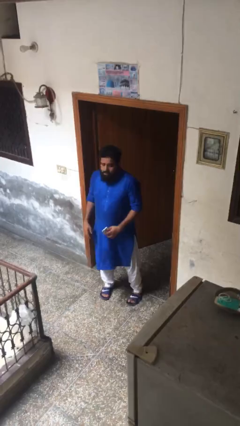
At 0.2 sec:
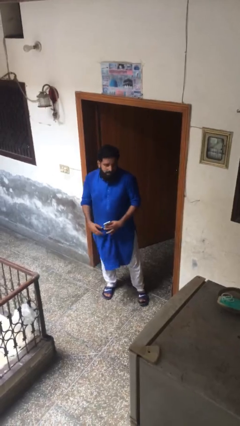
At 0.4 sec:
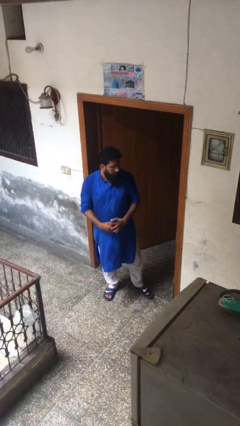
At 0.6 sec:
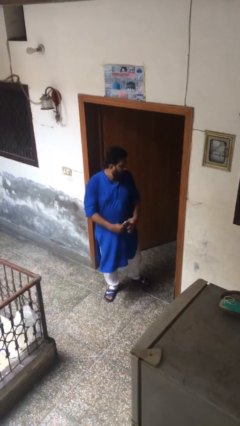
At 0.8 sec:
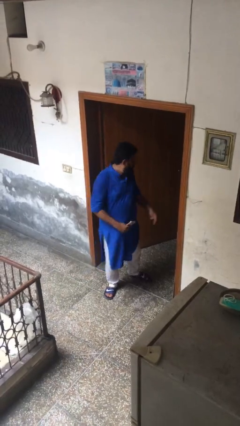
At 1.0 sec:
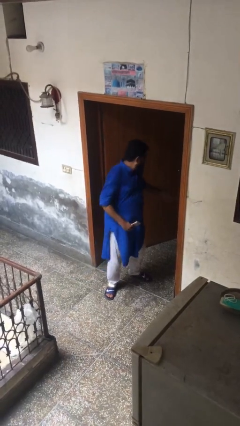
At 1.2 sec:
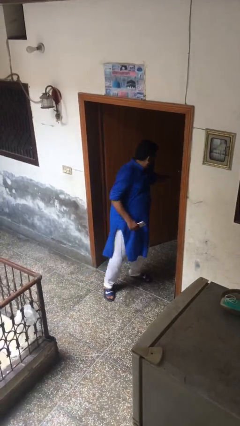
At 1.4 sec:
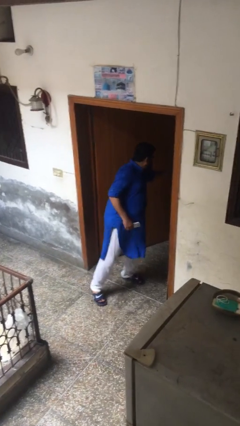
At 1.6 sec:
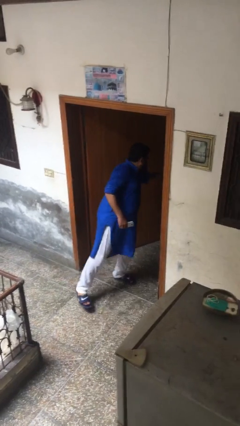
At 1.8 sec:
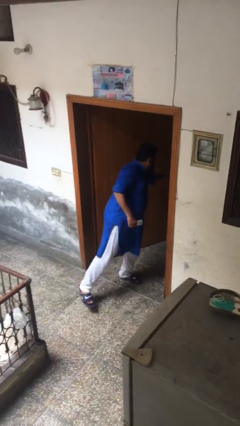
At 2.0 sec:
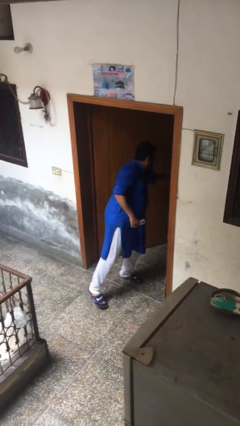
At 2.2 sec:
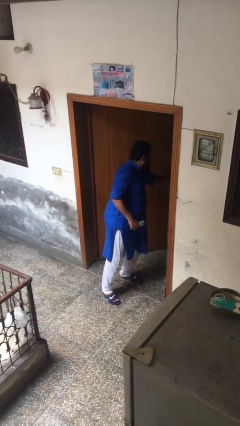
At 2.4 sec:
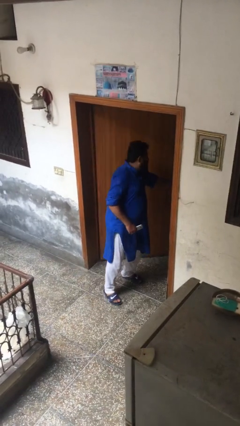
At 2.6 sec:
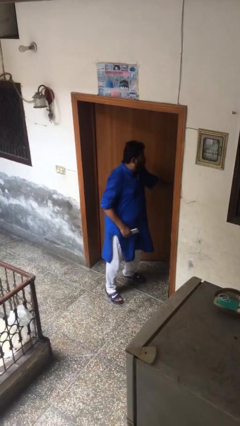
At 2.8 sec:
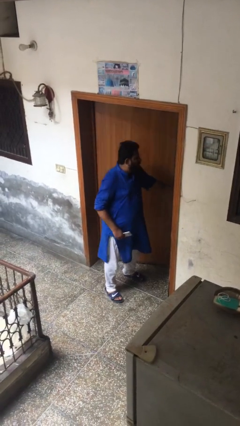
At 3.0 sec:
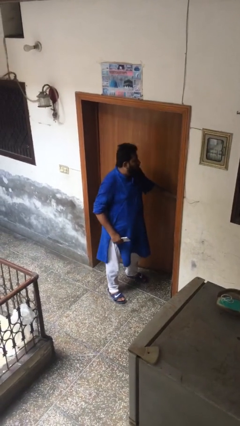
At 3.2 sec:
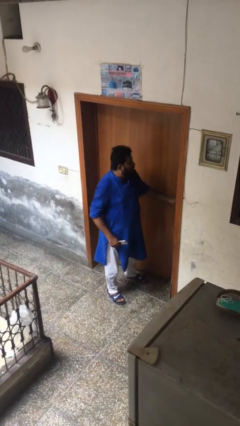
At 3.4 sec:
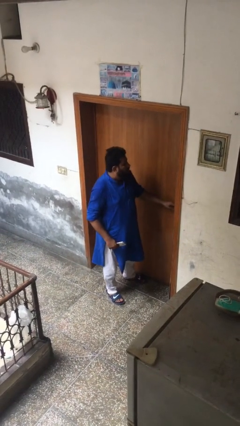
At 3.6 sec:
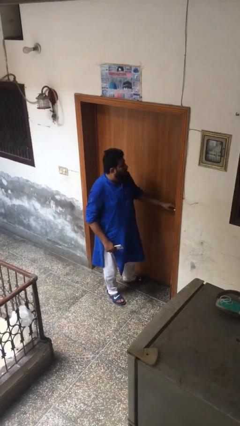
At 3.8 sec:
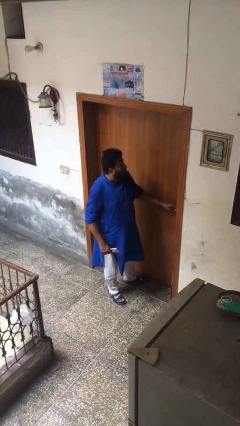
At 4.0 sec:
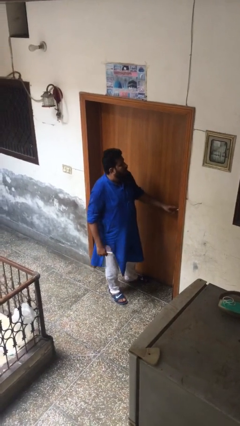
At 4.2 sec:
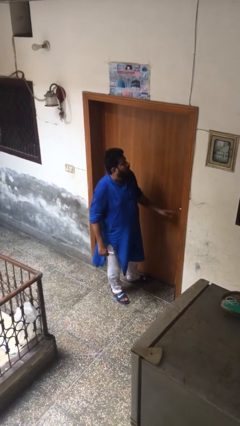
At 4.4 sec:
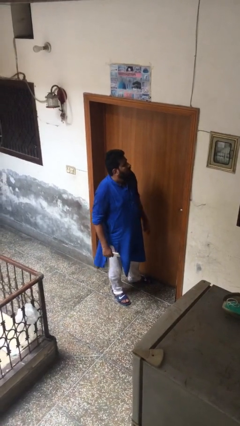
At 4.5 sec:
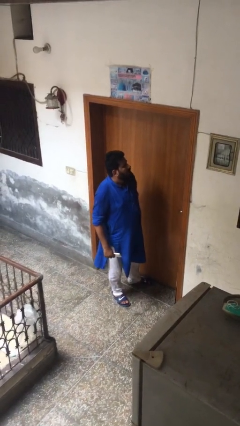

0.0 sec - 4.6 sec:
person closes facility door

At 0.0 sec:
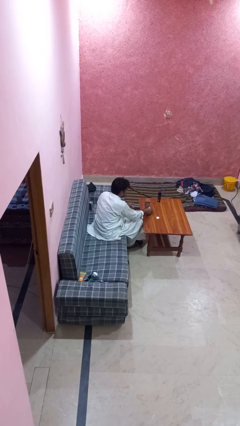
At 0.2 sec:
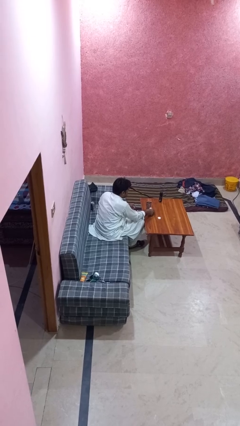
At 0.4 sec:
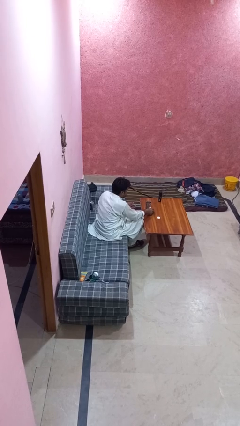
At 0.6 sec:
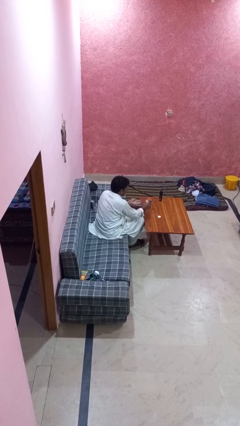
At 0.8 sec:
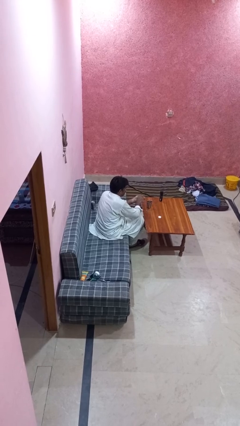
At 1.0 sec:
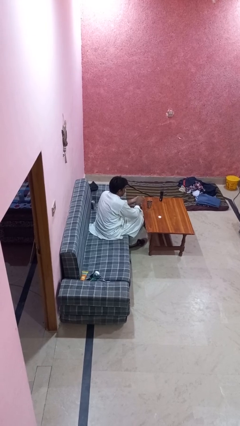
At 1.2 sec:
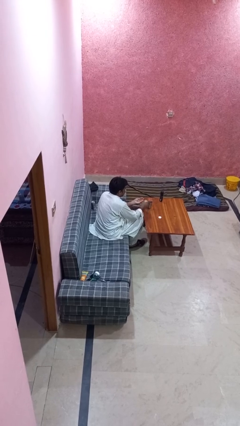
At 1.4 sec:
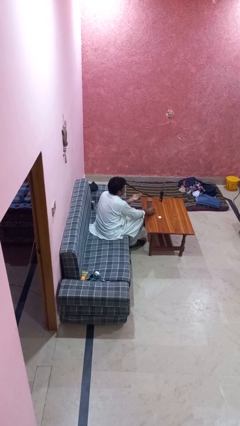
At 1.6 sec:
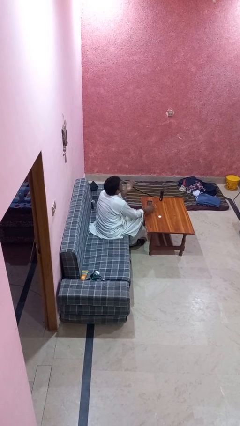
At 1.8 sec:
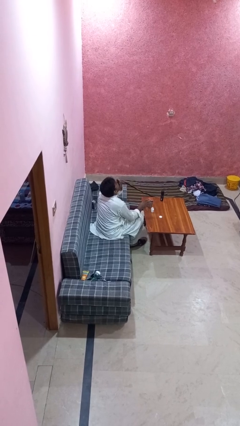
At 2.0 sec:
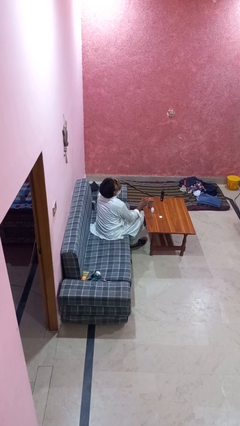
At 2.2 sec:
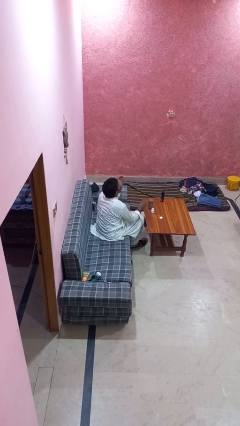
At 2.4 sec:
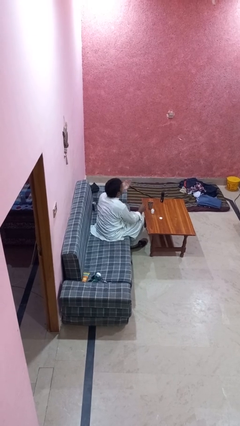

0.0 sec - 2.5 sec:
person takes medicine pills

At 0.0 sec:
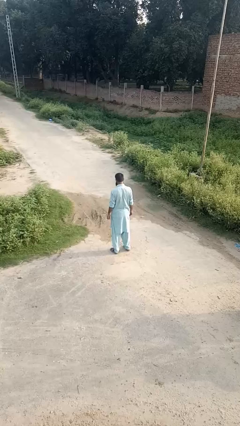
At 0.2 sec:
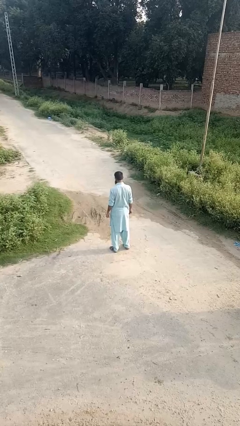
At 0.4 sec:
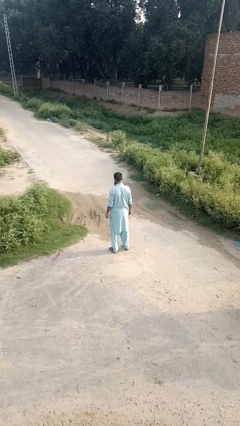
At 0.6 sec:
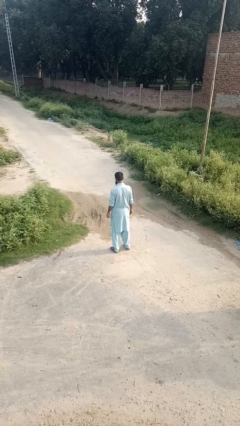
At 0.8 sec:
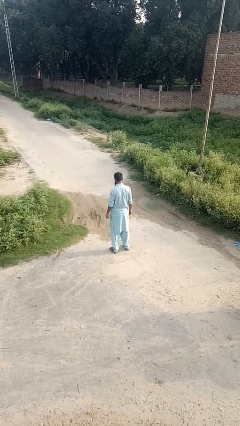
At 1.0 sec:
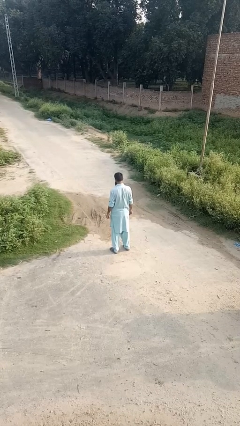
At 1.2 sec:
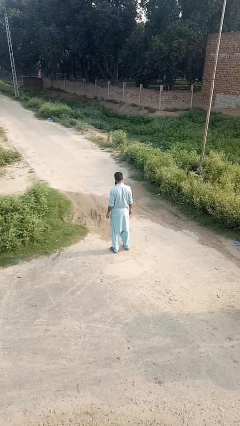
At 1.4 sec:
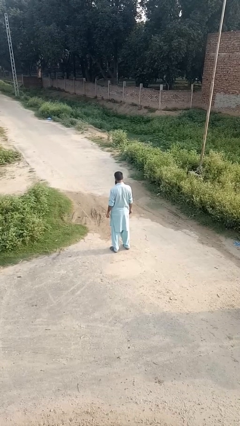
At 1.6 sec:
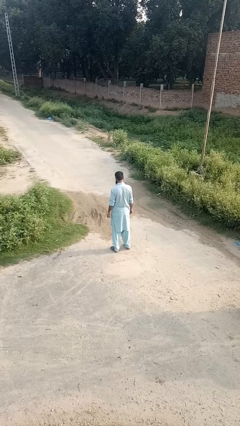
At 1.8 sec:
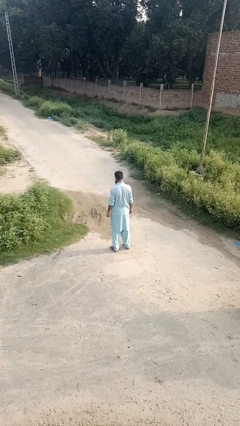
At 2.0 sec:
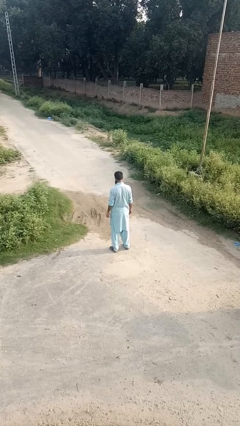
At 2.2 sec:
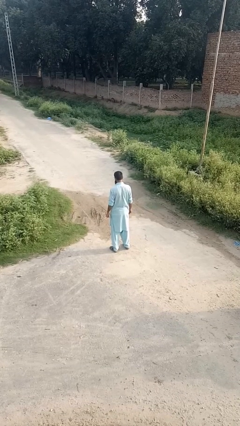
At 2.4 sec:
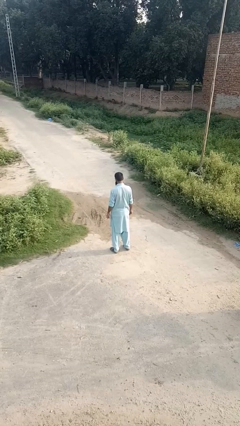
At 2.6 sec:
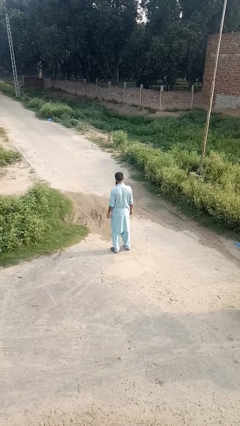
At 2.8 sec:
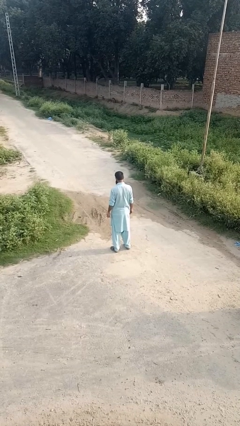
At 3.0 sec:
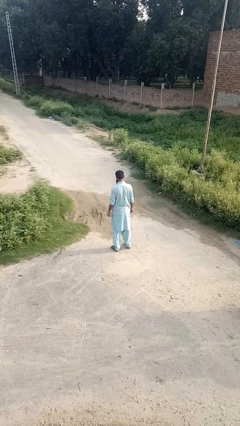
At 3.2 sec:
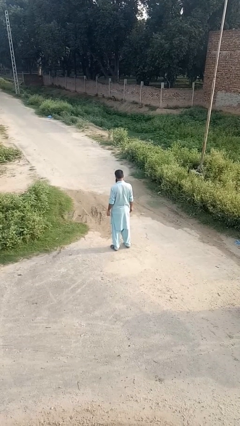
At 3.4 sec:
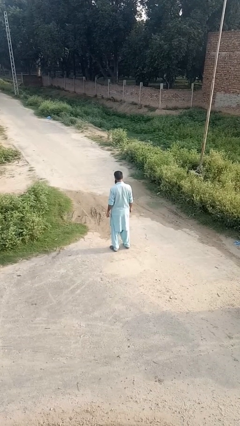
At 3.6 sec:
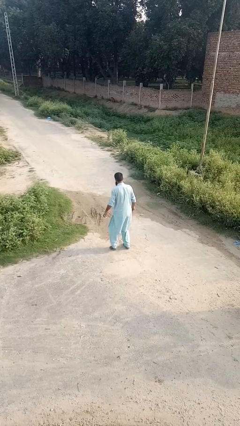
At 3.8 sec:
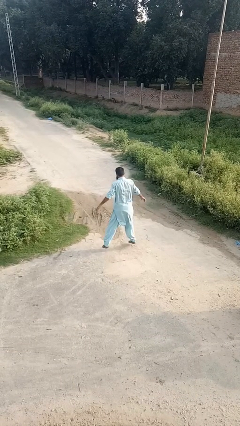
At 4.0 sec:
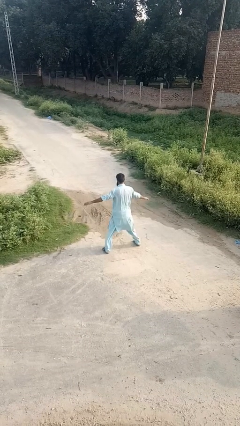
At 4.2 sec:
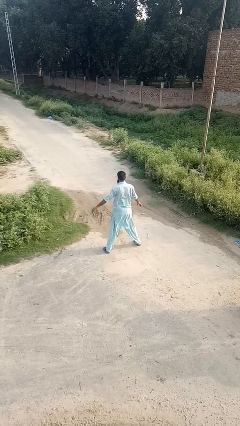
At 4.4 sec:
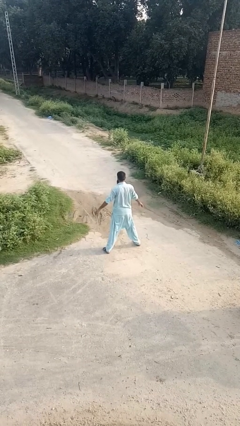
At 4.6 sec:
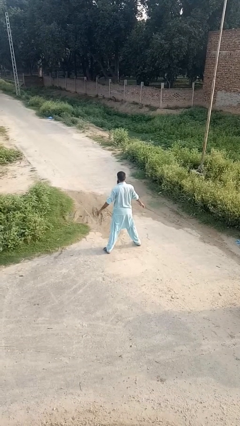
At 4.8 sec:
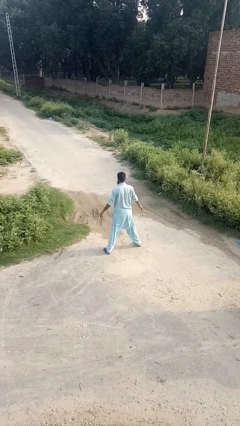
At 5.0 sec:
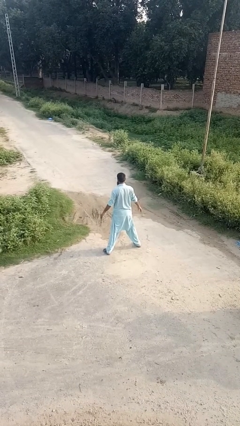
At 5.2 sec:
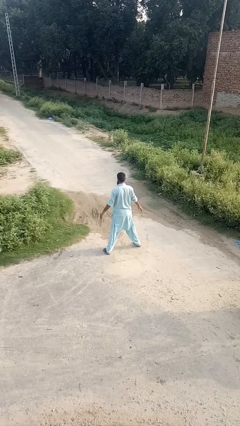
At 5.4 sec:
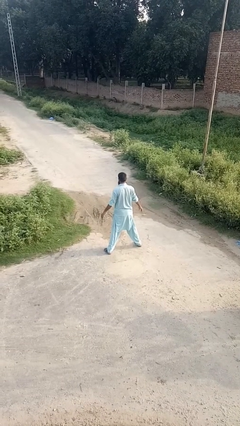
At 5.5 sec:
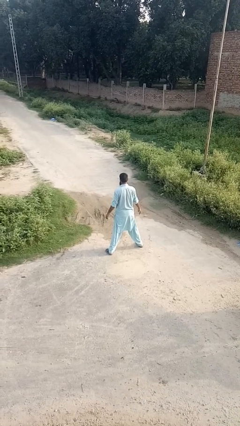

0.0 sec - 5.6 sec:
person stretches back

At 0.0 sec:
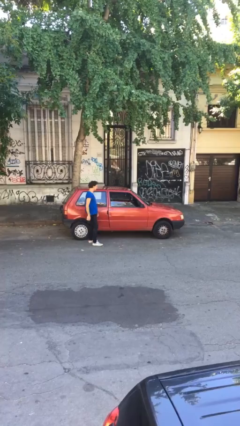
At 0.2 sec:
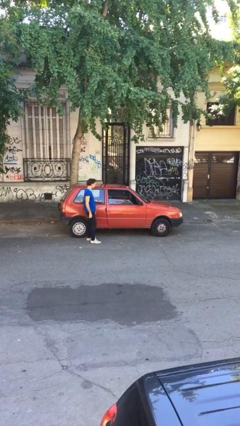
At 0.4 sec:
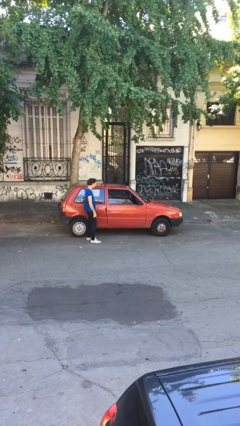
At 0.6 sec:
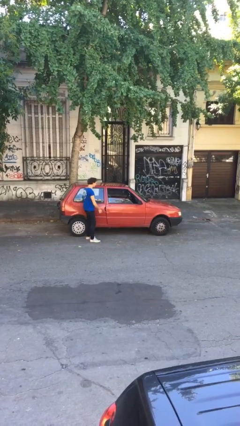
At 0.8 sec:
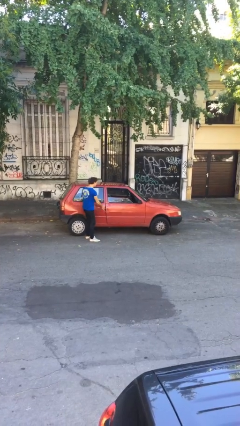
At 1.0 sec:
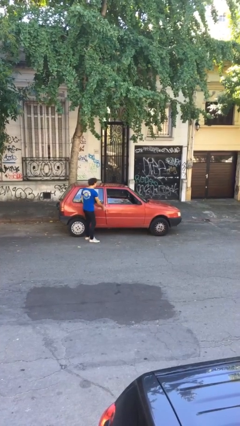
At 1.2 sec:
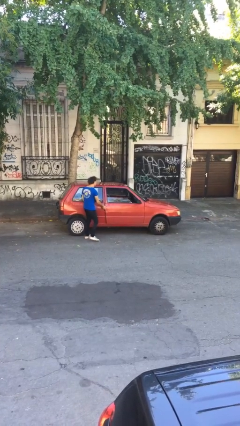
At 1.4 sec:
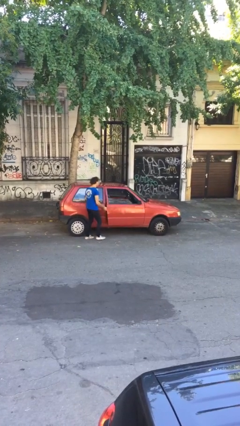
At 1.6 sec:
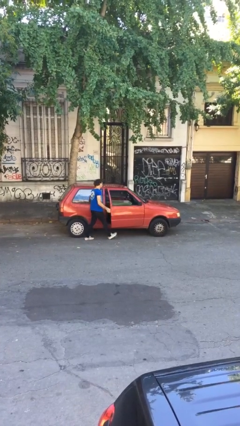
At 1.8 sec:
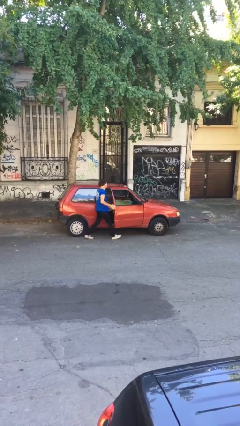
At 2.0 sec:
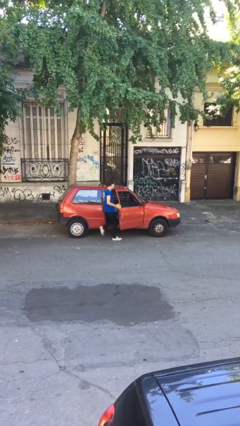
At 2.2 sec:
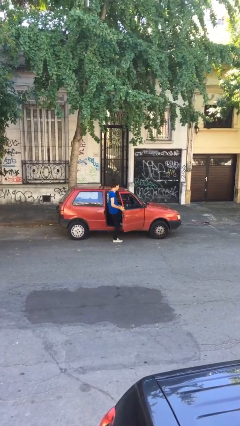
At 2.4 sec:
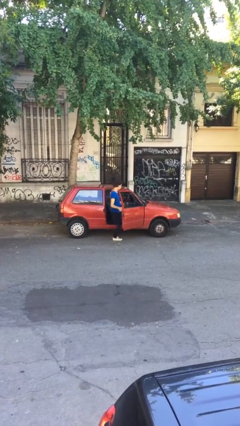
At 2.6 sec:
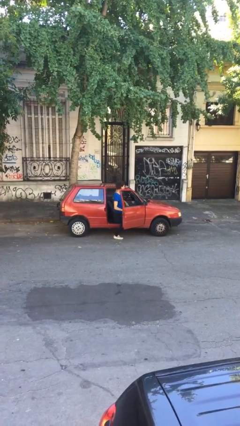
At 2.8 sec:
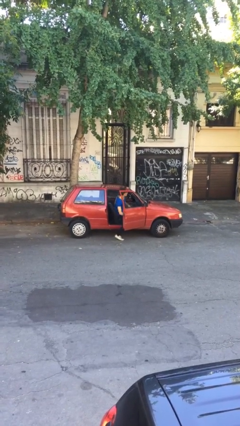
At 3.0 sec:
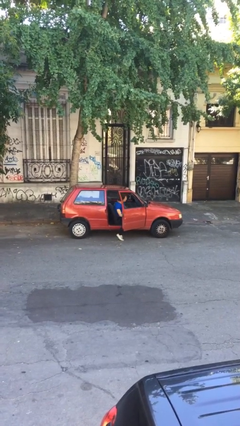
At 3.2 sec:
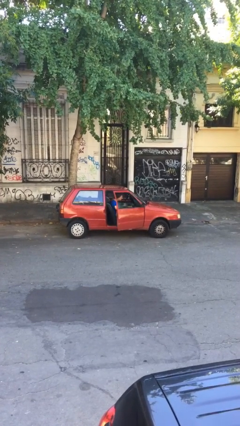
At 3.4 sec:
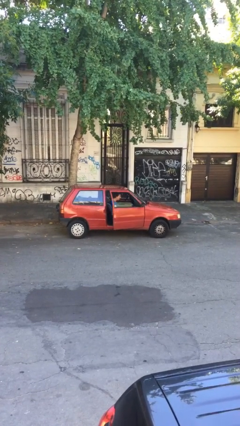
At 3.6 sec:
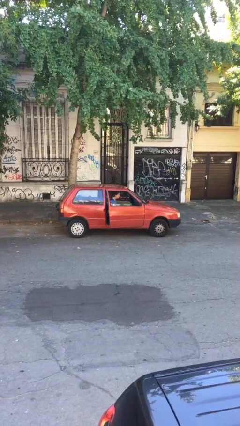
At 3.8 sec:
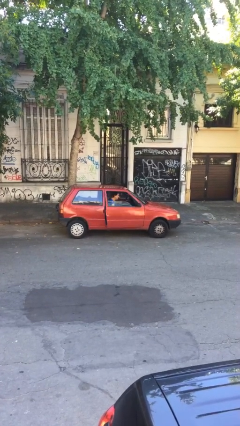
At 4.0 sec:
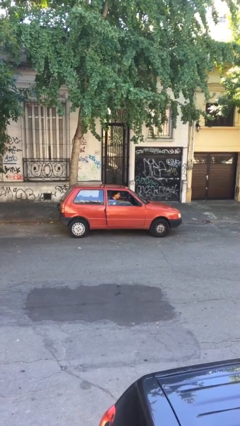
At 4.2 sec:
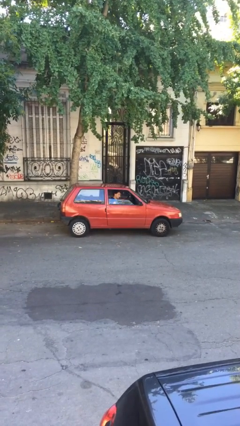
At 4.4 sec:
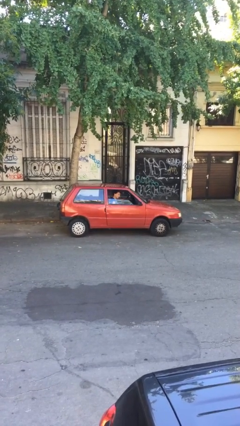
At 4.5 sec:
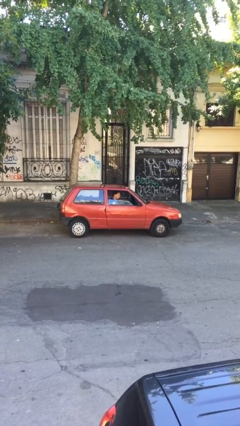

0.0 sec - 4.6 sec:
car picks up person
